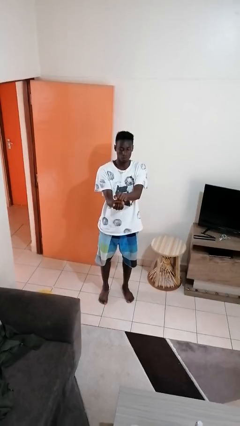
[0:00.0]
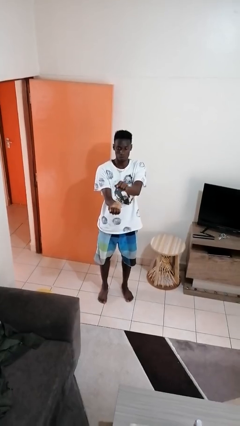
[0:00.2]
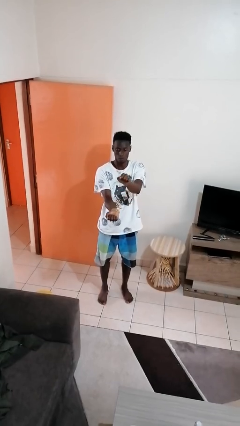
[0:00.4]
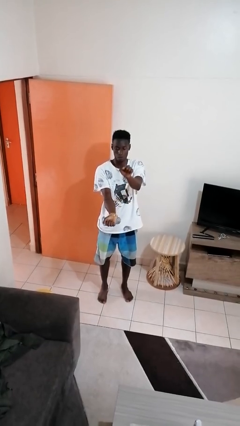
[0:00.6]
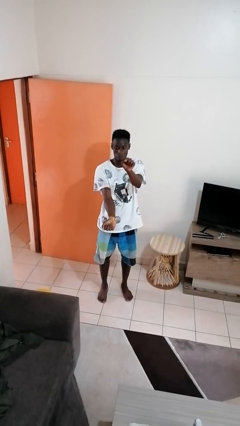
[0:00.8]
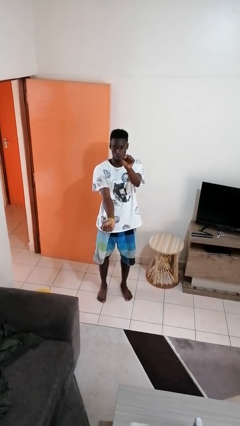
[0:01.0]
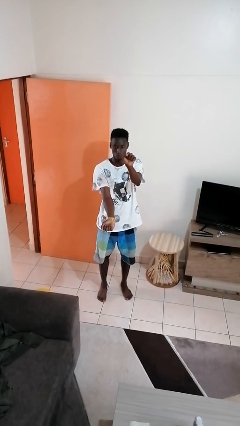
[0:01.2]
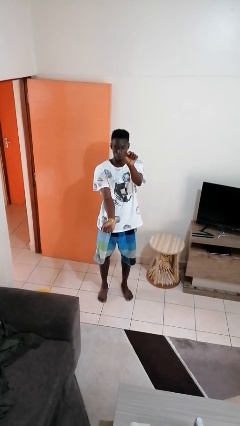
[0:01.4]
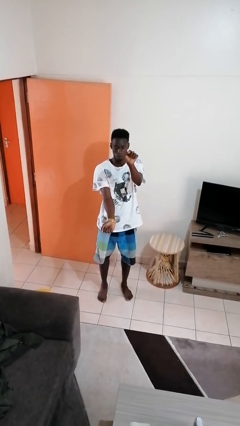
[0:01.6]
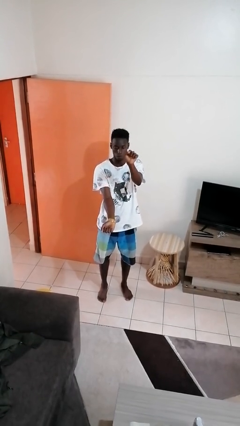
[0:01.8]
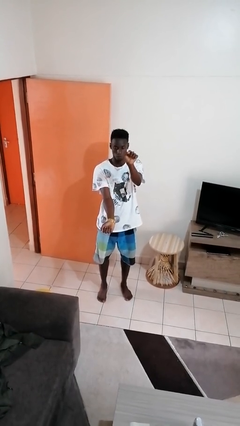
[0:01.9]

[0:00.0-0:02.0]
person gestures zoom in

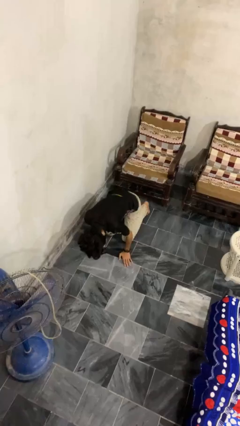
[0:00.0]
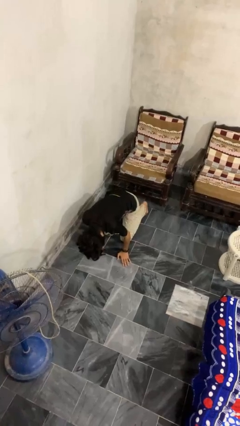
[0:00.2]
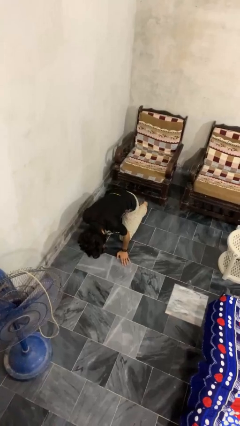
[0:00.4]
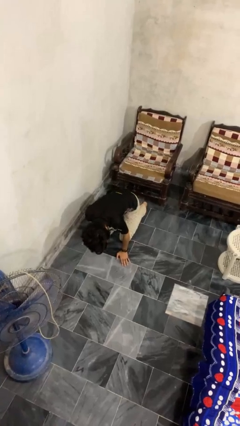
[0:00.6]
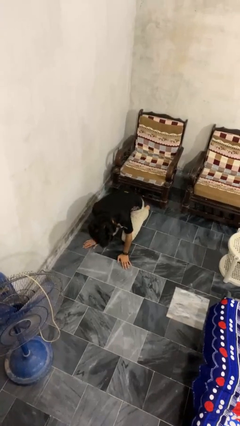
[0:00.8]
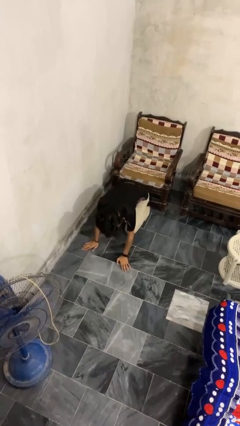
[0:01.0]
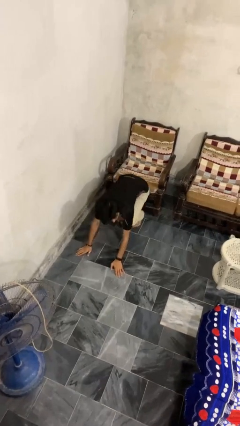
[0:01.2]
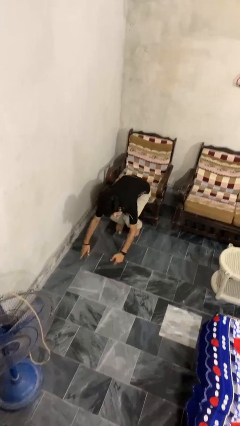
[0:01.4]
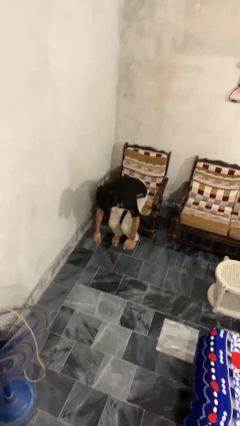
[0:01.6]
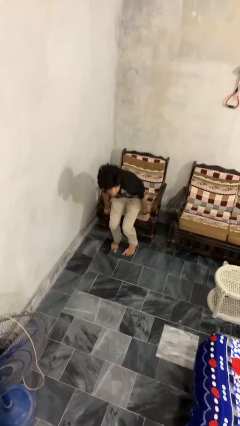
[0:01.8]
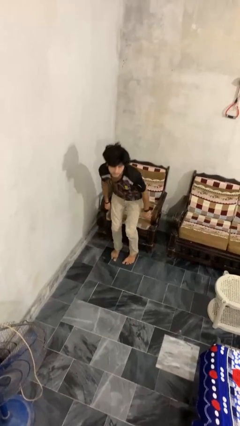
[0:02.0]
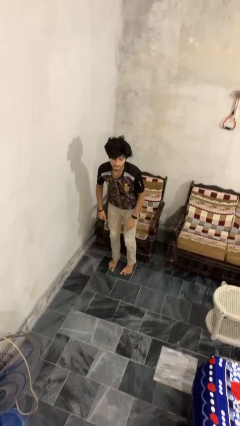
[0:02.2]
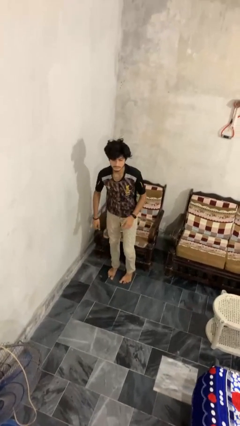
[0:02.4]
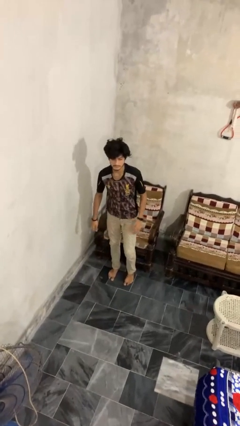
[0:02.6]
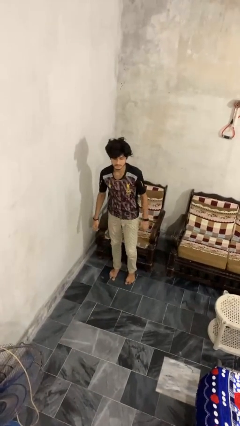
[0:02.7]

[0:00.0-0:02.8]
person stands up from floor

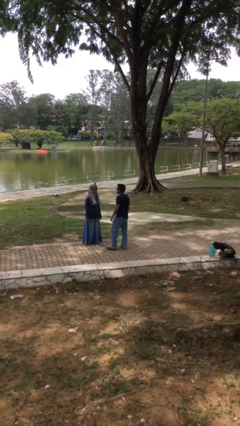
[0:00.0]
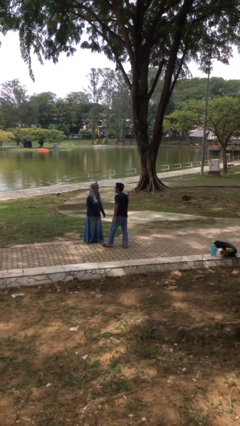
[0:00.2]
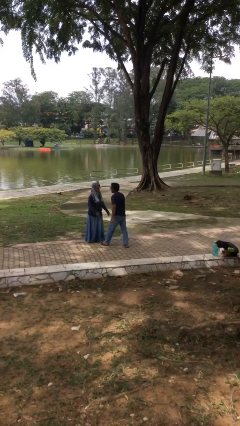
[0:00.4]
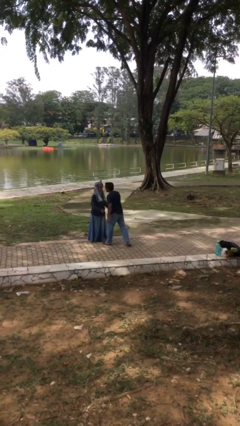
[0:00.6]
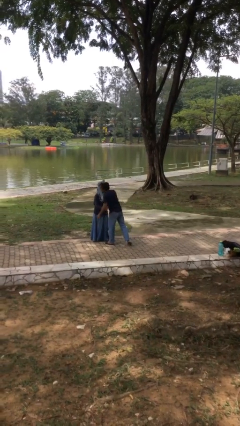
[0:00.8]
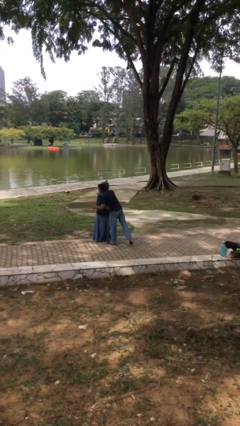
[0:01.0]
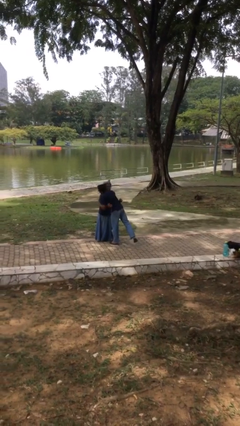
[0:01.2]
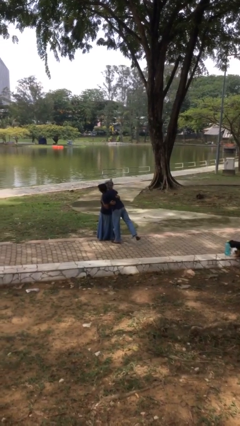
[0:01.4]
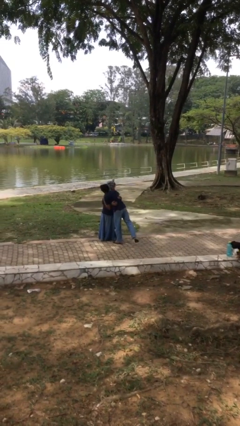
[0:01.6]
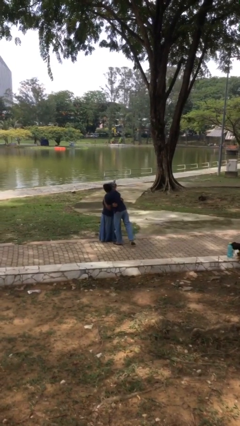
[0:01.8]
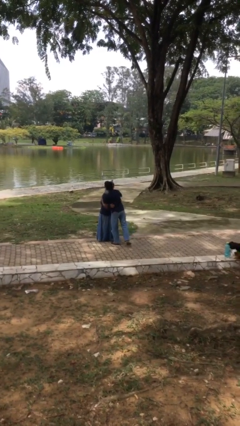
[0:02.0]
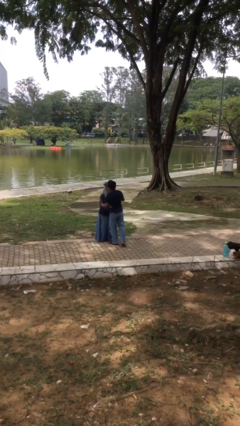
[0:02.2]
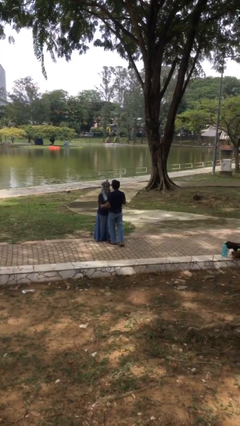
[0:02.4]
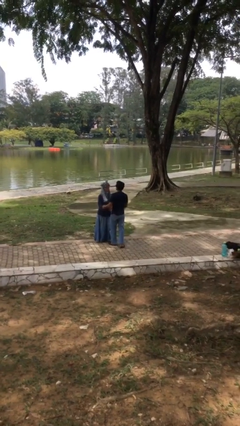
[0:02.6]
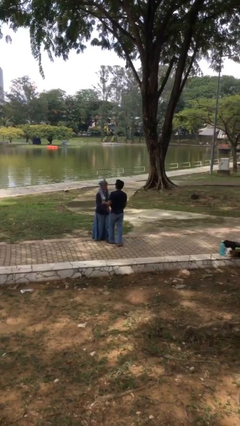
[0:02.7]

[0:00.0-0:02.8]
person embraces person

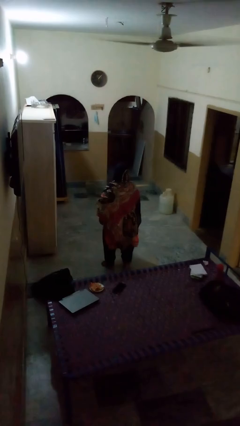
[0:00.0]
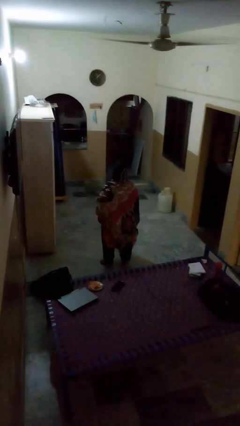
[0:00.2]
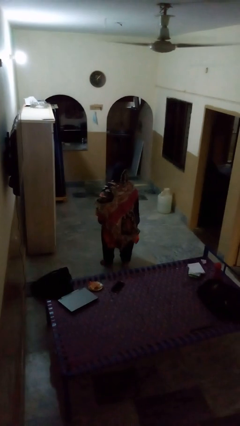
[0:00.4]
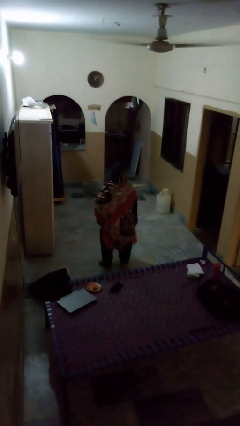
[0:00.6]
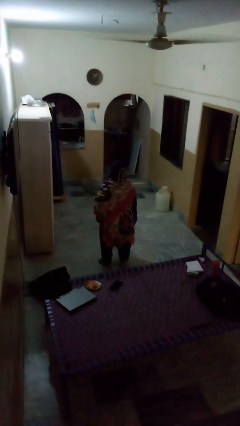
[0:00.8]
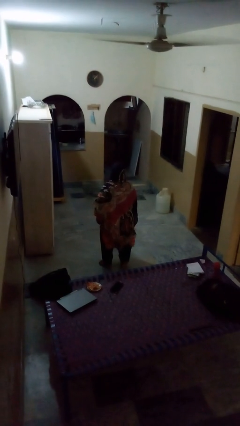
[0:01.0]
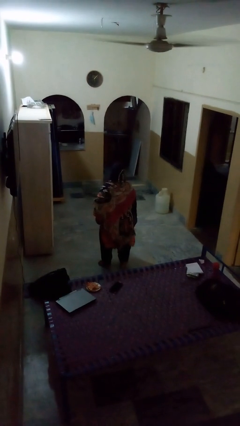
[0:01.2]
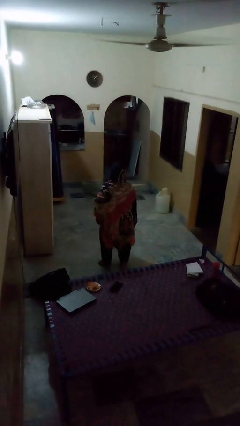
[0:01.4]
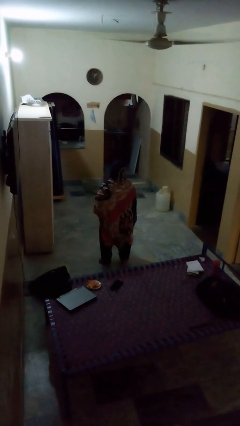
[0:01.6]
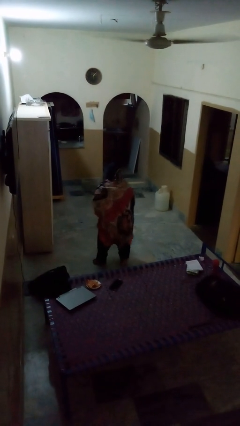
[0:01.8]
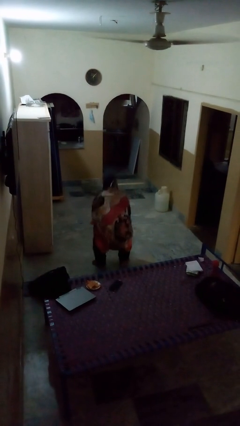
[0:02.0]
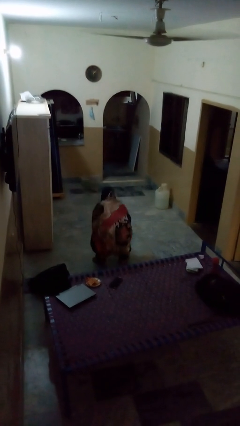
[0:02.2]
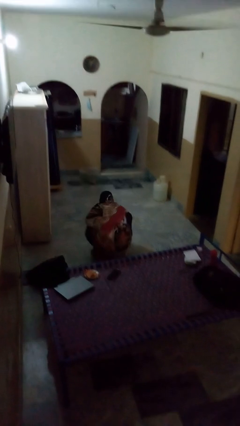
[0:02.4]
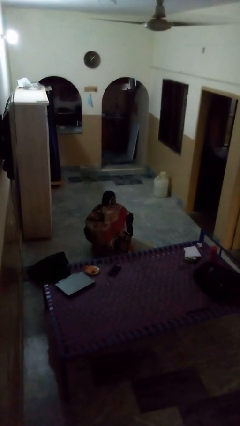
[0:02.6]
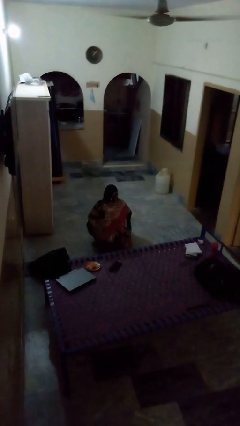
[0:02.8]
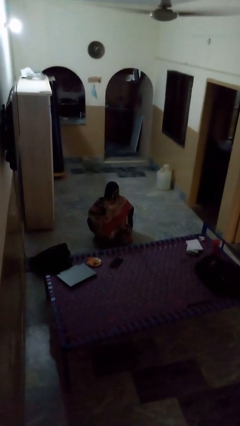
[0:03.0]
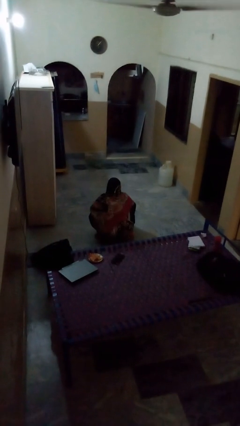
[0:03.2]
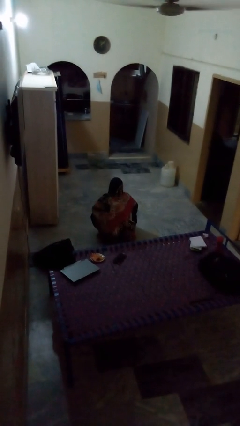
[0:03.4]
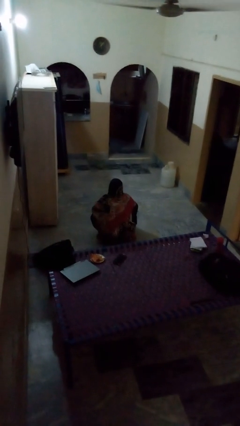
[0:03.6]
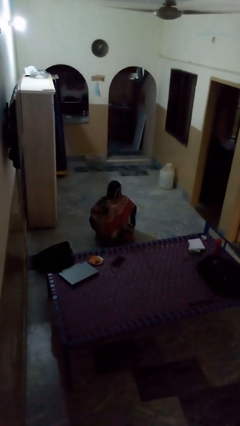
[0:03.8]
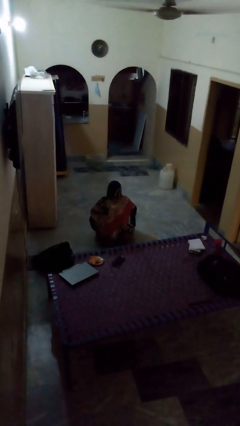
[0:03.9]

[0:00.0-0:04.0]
person squats

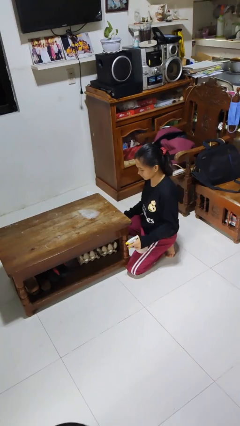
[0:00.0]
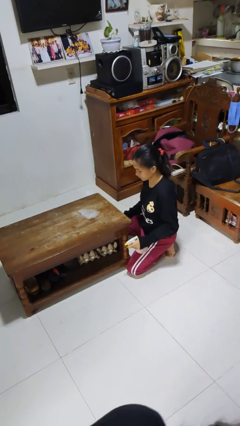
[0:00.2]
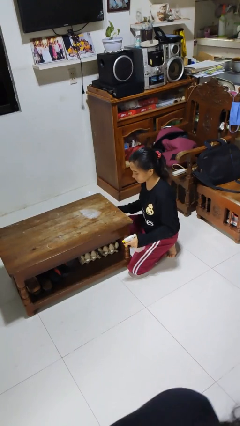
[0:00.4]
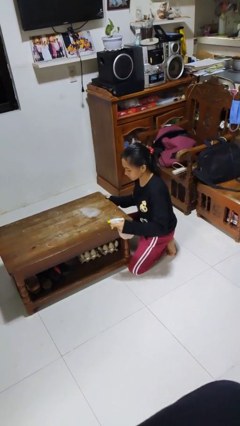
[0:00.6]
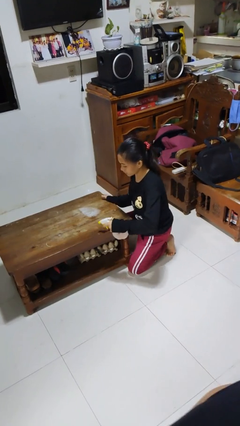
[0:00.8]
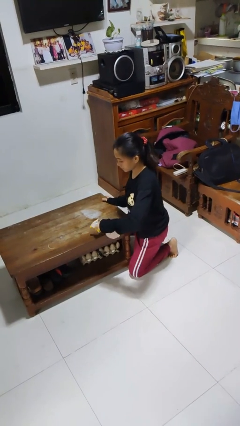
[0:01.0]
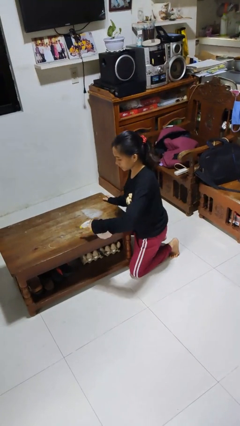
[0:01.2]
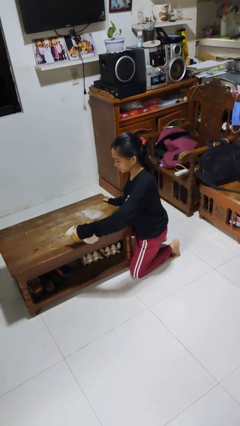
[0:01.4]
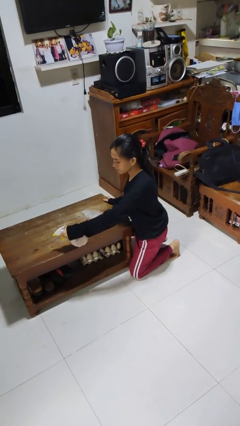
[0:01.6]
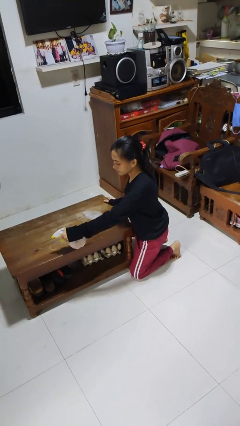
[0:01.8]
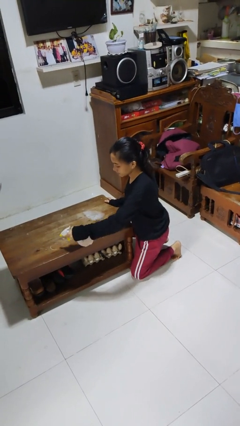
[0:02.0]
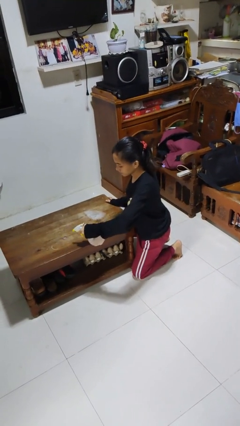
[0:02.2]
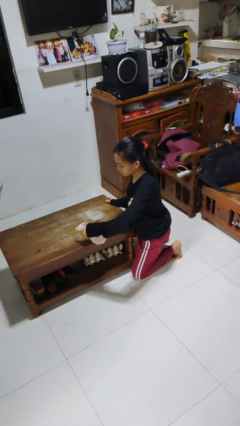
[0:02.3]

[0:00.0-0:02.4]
person sprays from bottle

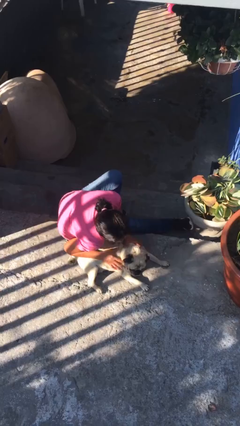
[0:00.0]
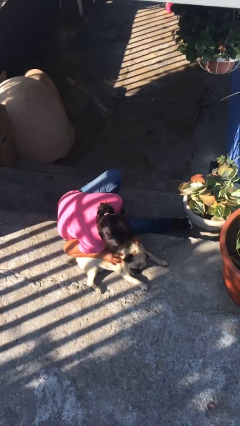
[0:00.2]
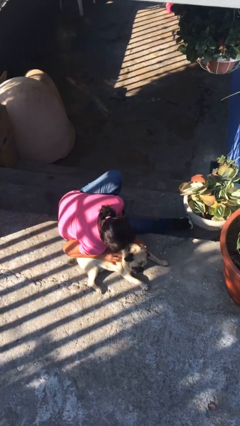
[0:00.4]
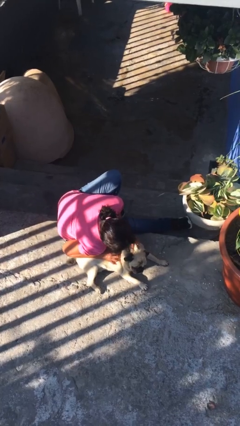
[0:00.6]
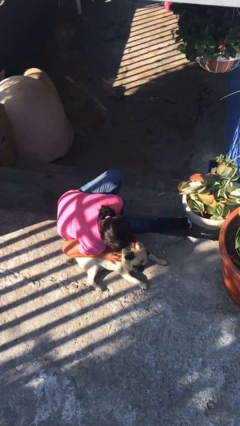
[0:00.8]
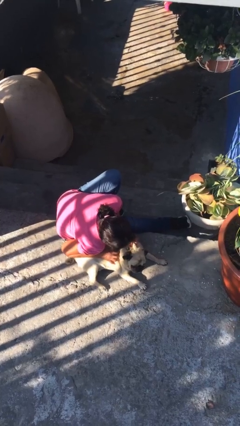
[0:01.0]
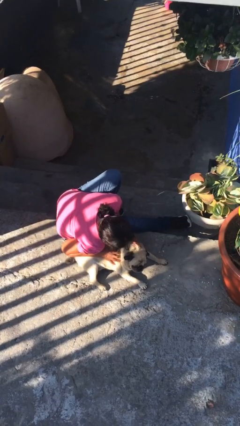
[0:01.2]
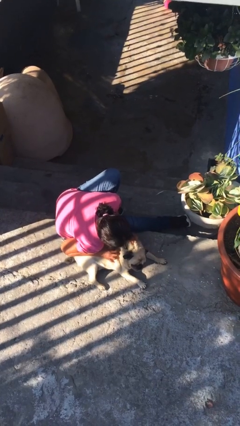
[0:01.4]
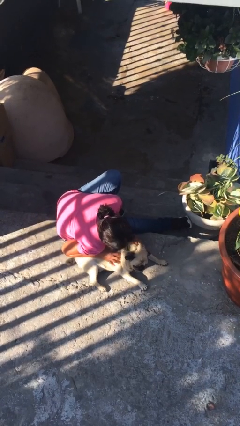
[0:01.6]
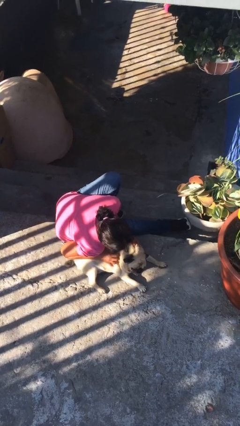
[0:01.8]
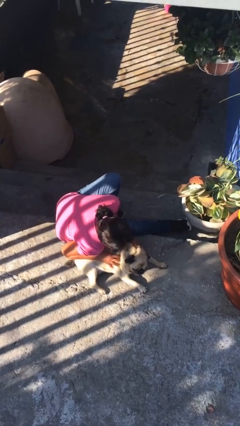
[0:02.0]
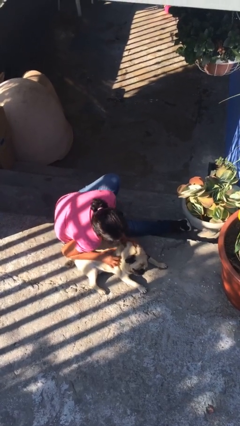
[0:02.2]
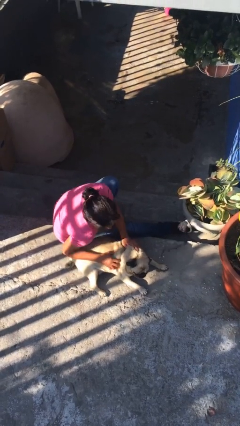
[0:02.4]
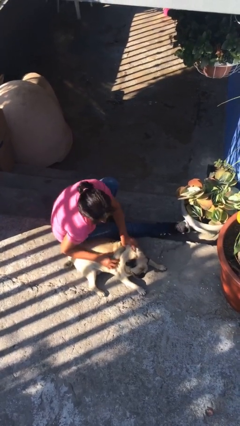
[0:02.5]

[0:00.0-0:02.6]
person hugs dog

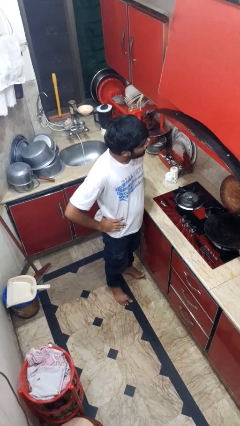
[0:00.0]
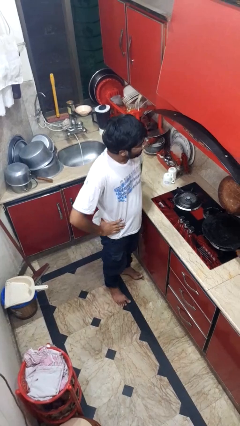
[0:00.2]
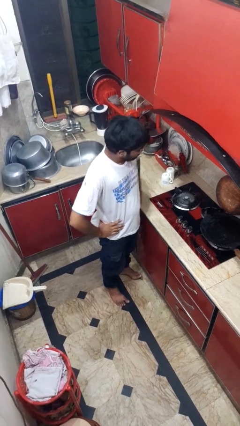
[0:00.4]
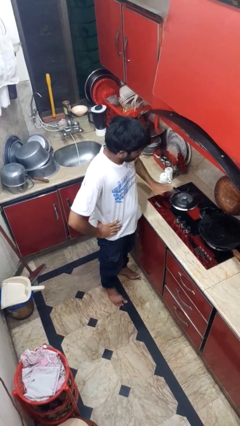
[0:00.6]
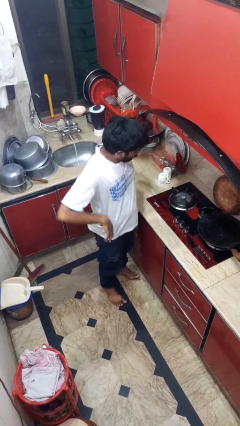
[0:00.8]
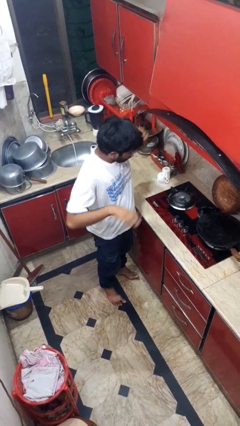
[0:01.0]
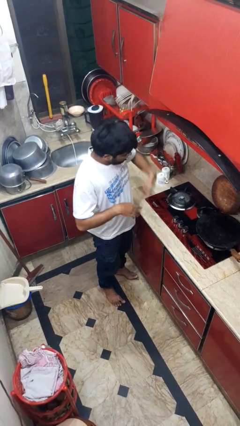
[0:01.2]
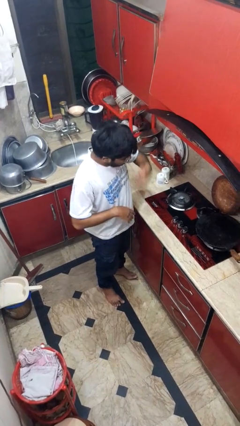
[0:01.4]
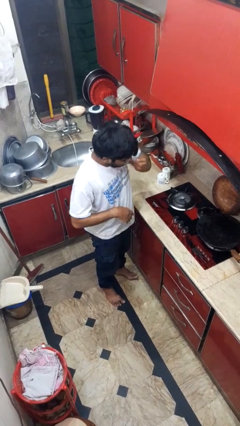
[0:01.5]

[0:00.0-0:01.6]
person burns hand
